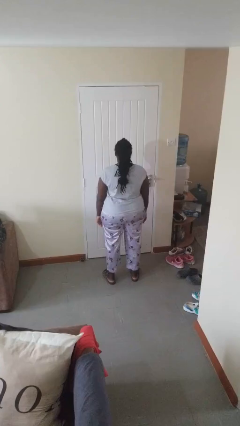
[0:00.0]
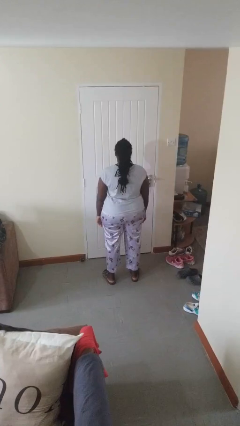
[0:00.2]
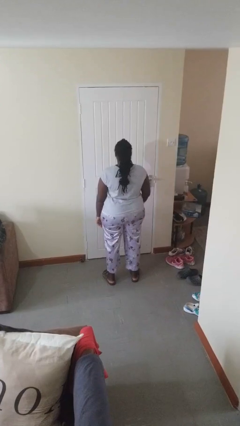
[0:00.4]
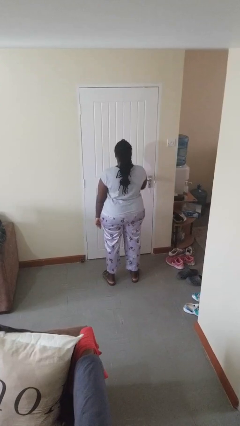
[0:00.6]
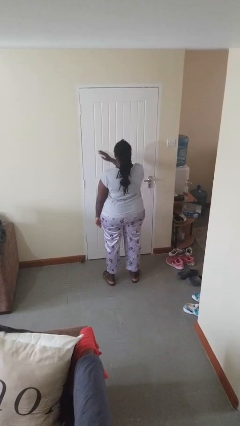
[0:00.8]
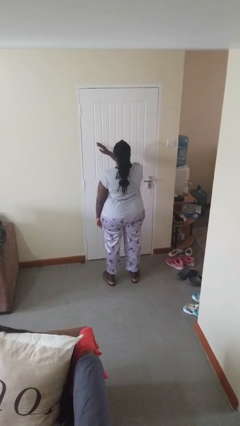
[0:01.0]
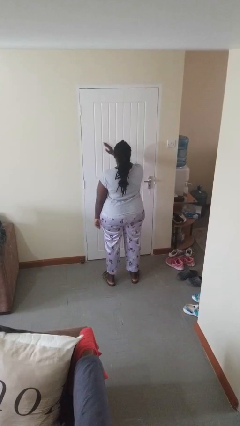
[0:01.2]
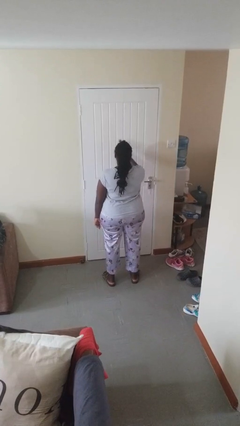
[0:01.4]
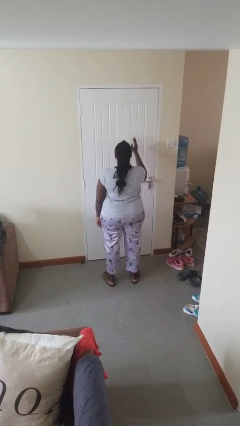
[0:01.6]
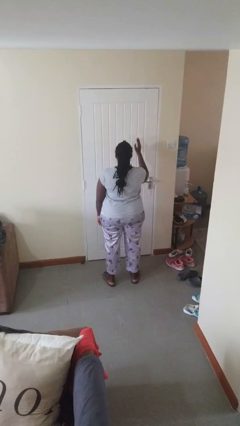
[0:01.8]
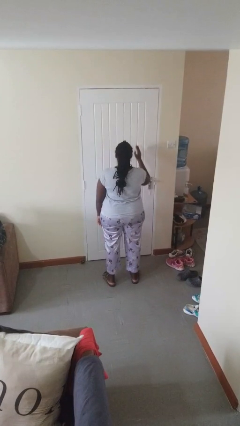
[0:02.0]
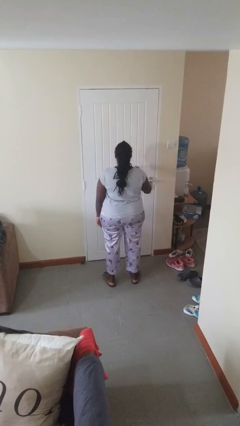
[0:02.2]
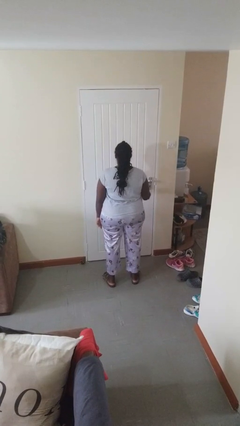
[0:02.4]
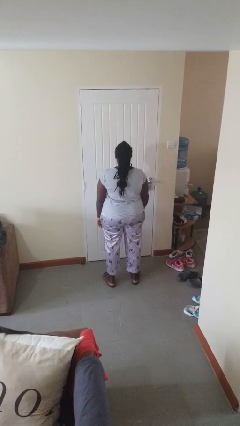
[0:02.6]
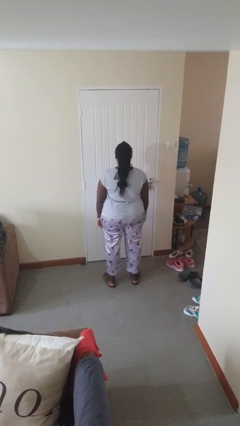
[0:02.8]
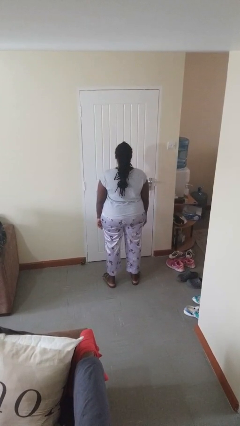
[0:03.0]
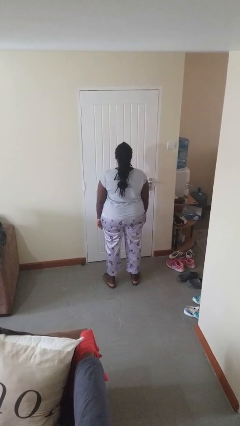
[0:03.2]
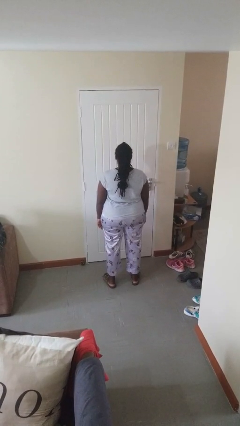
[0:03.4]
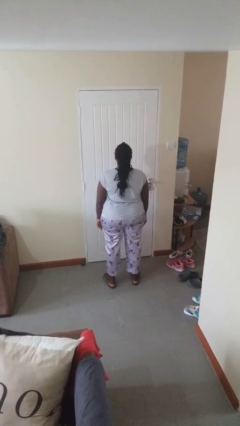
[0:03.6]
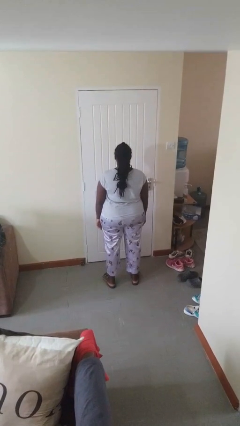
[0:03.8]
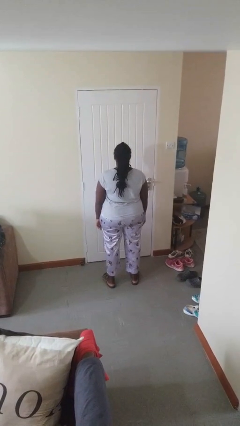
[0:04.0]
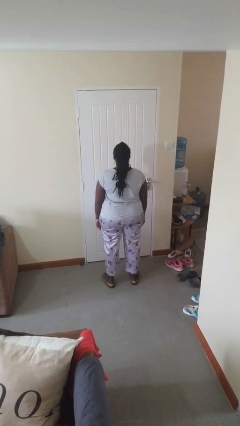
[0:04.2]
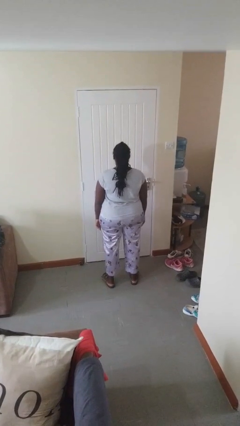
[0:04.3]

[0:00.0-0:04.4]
person gestures swipe right

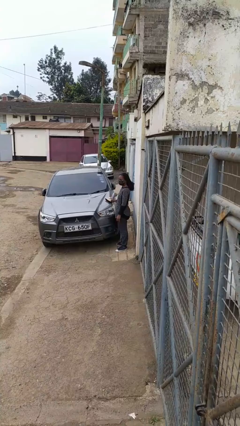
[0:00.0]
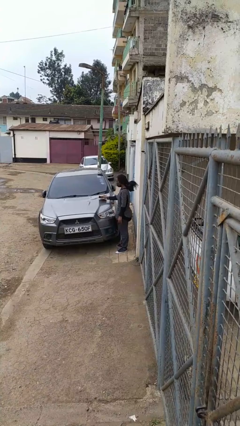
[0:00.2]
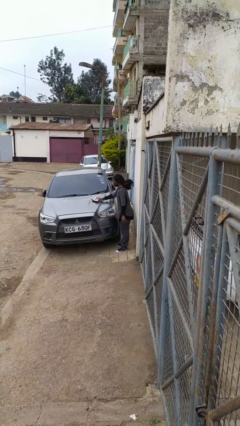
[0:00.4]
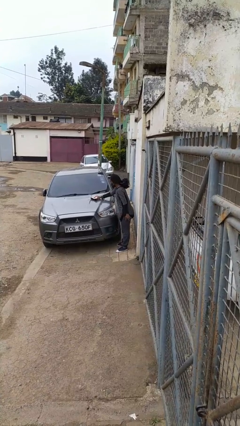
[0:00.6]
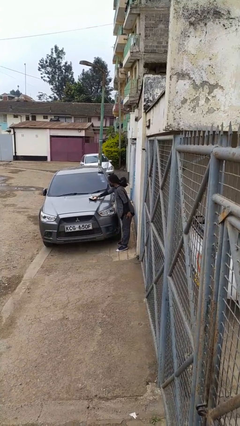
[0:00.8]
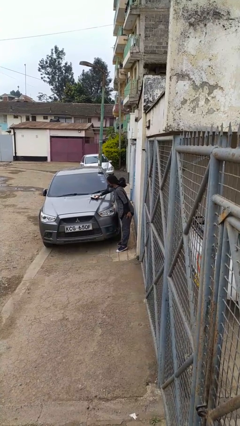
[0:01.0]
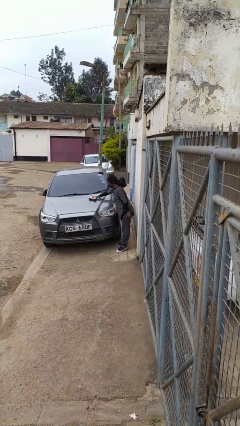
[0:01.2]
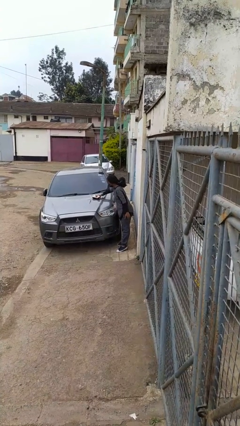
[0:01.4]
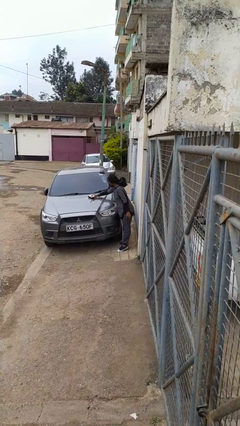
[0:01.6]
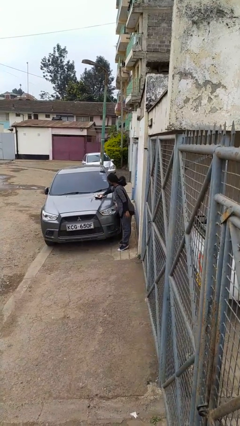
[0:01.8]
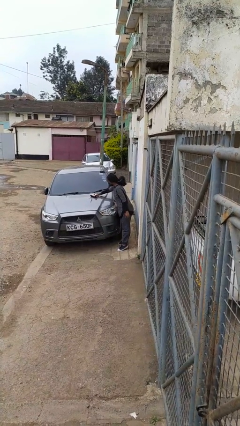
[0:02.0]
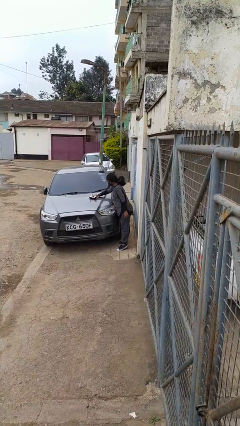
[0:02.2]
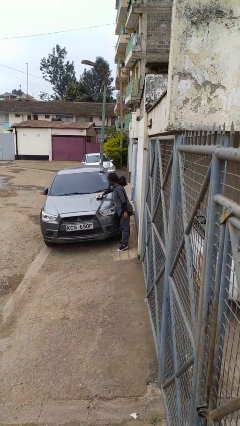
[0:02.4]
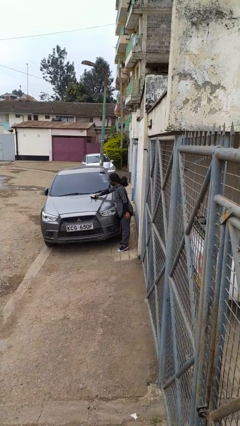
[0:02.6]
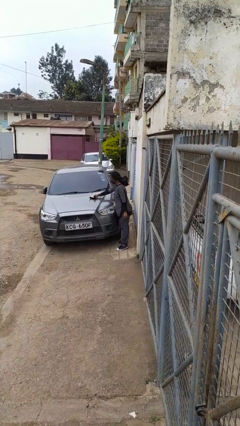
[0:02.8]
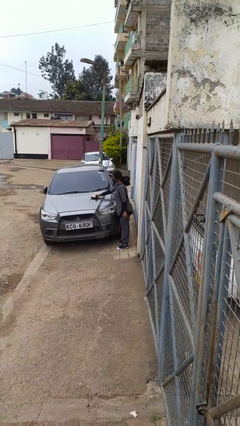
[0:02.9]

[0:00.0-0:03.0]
person polishes car with rag

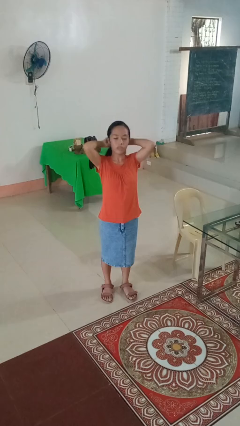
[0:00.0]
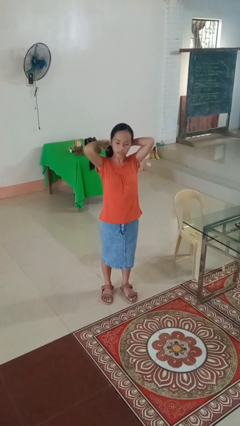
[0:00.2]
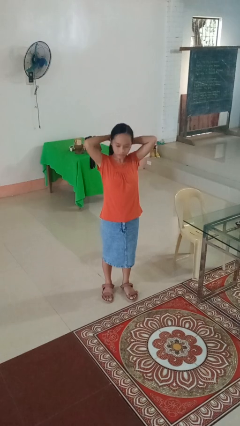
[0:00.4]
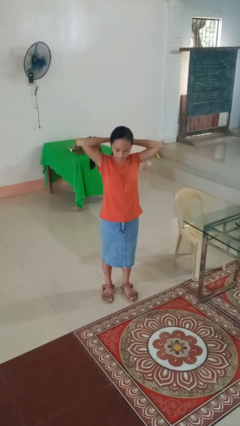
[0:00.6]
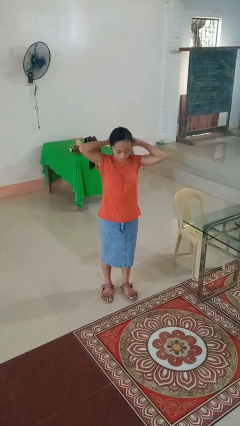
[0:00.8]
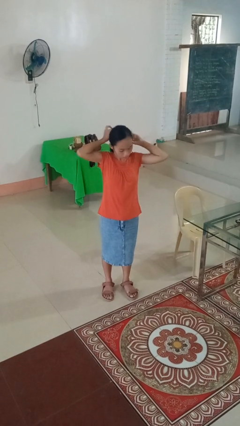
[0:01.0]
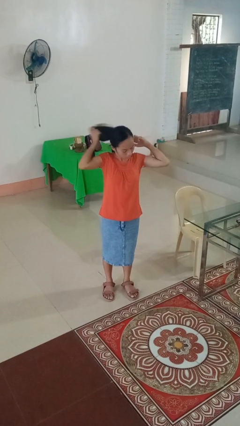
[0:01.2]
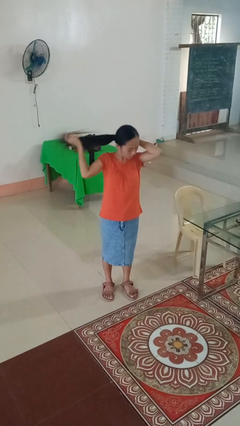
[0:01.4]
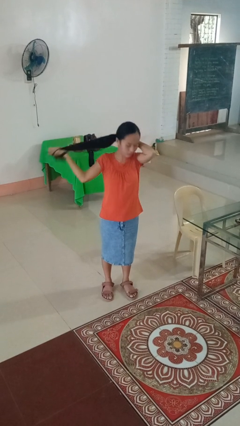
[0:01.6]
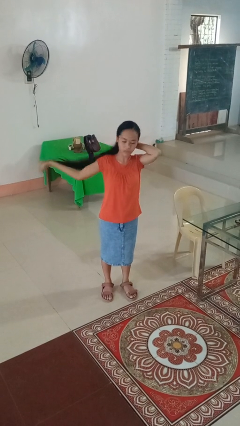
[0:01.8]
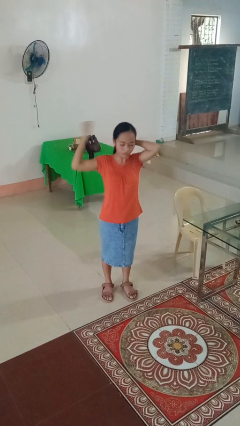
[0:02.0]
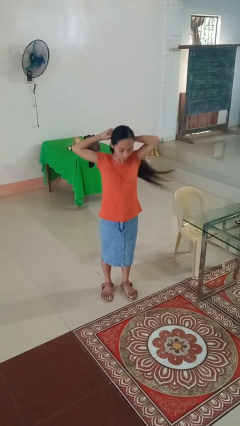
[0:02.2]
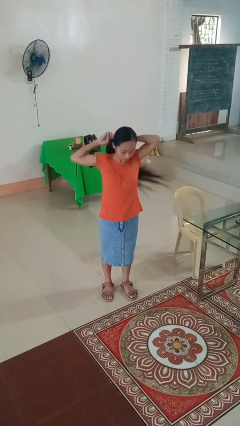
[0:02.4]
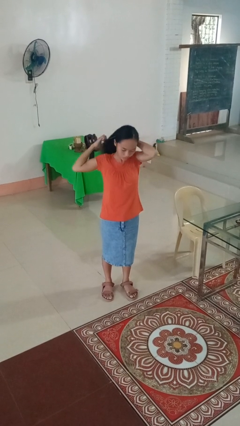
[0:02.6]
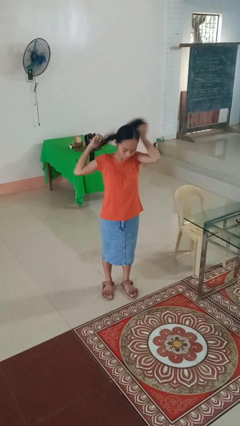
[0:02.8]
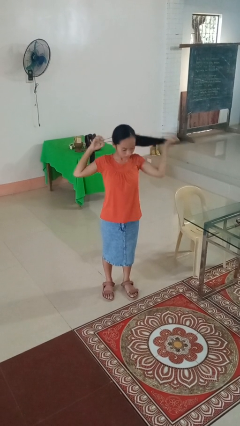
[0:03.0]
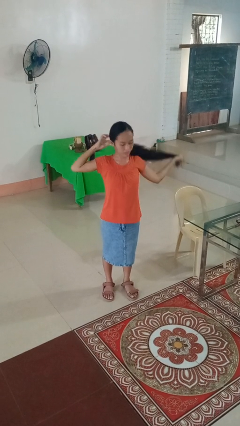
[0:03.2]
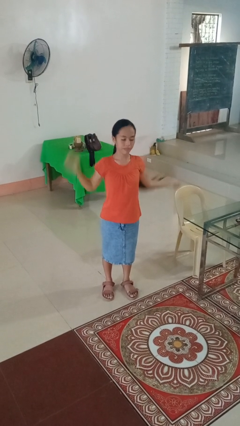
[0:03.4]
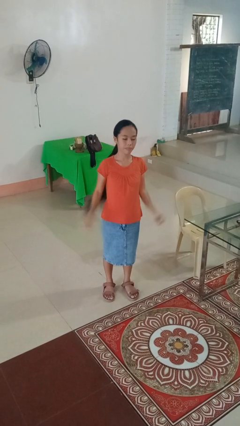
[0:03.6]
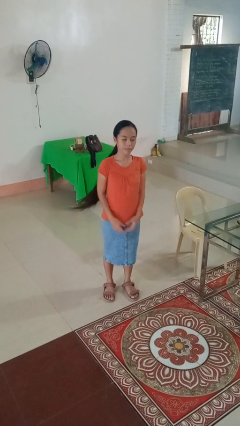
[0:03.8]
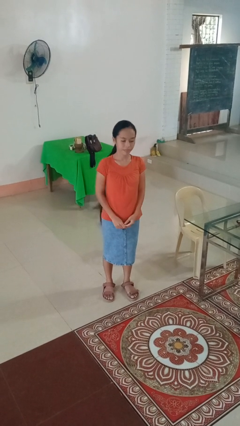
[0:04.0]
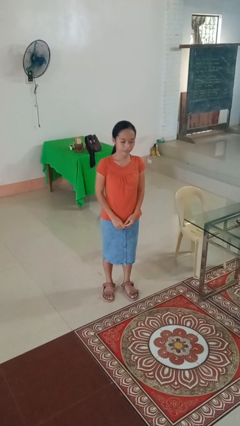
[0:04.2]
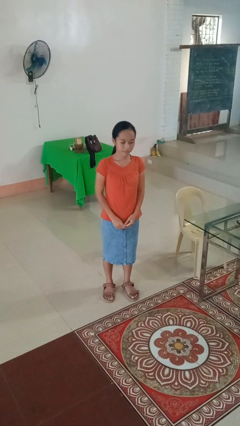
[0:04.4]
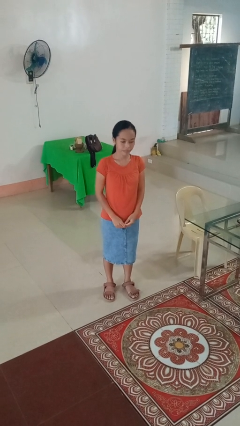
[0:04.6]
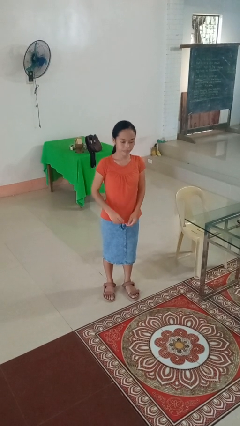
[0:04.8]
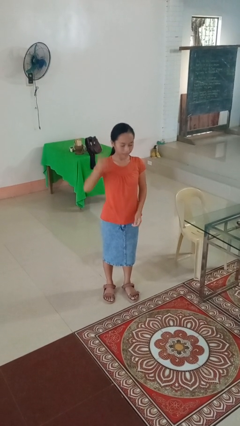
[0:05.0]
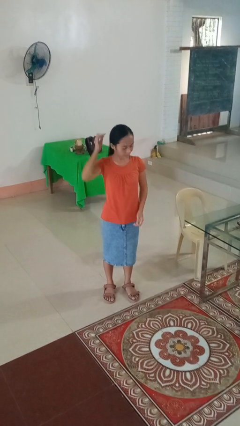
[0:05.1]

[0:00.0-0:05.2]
person puts hair in ponytail

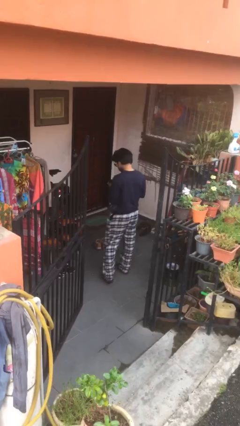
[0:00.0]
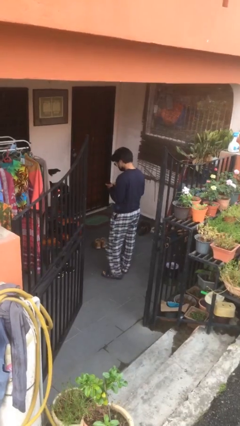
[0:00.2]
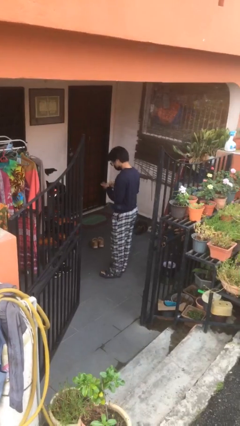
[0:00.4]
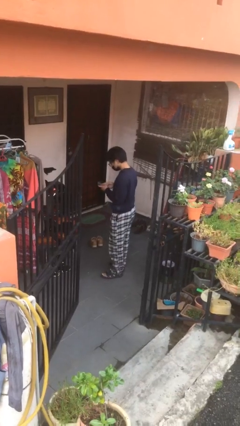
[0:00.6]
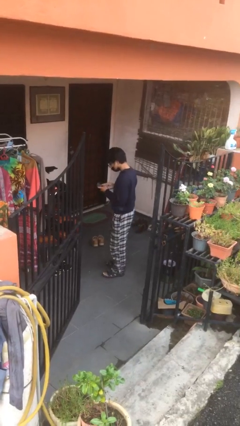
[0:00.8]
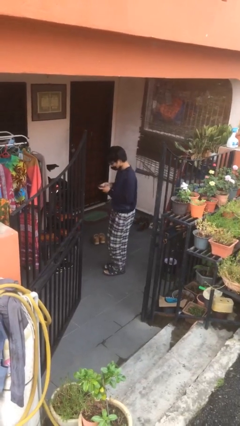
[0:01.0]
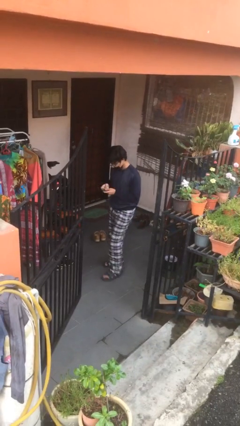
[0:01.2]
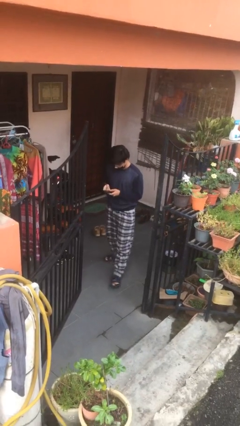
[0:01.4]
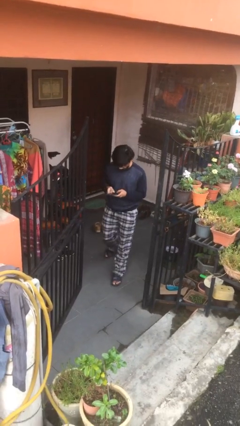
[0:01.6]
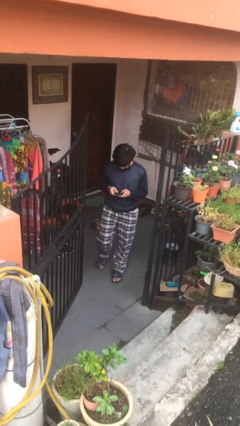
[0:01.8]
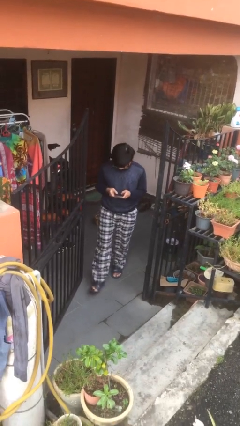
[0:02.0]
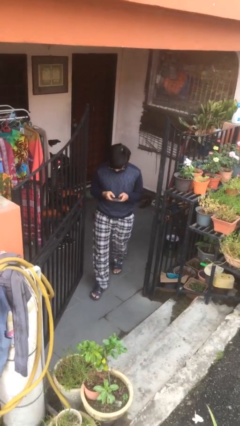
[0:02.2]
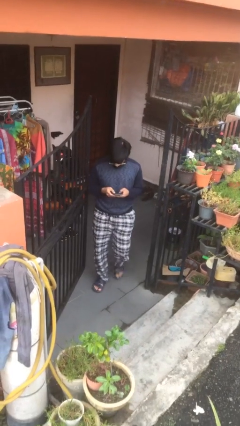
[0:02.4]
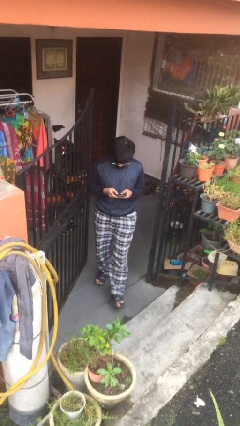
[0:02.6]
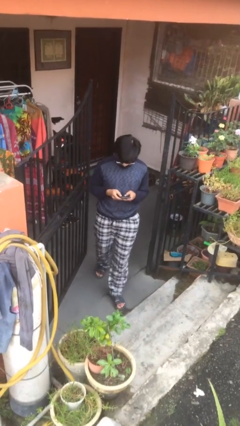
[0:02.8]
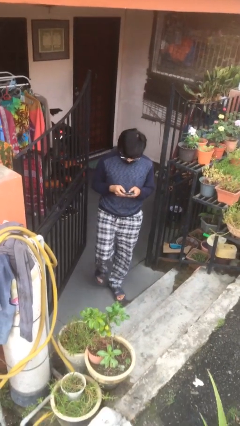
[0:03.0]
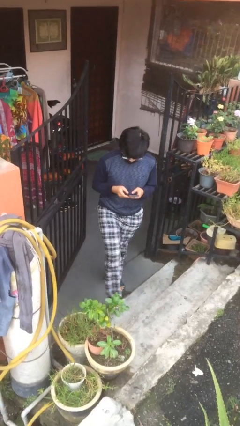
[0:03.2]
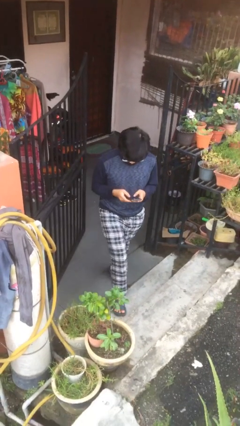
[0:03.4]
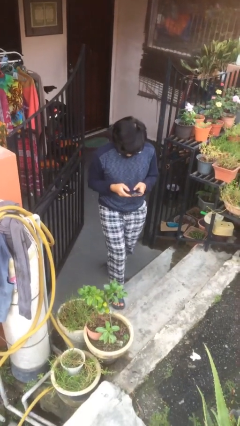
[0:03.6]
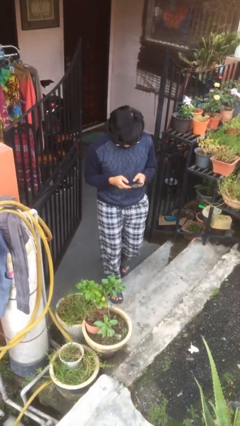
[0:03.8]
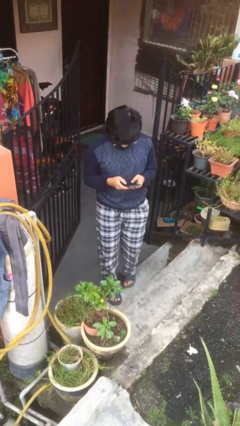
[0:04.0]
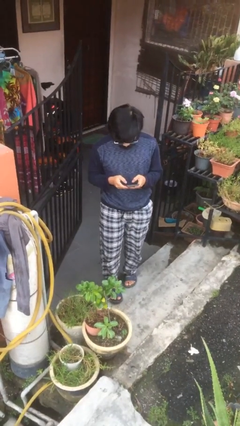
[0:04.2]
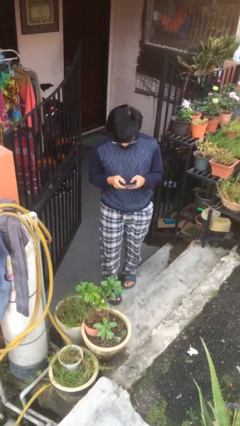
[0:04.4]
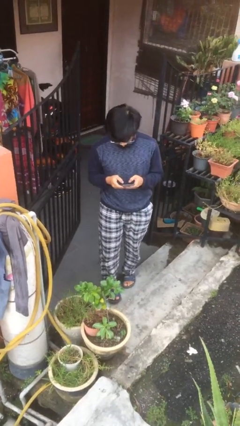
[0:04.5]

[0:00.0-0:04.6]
person enters scene through structure

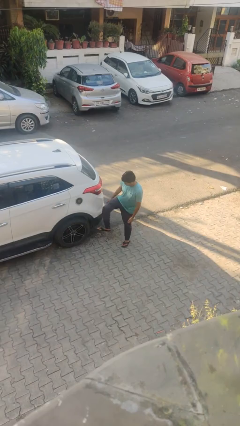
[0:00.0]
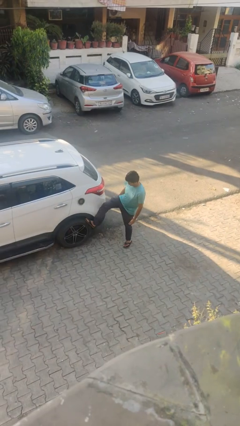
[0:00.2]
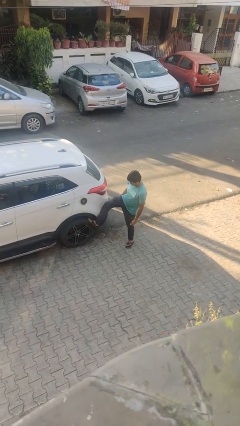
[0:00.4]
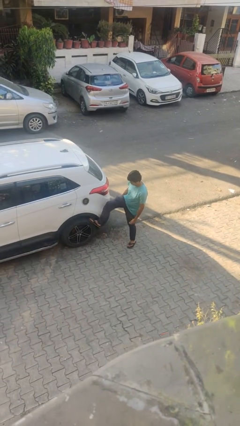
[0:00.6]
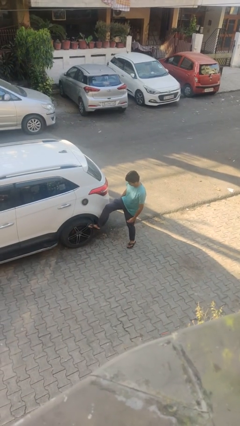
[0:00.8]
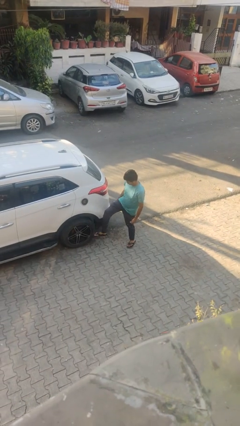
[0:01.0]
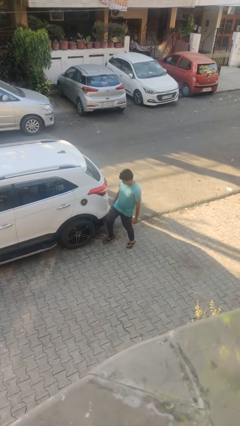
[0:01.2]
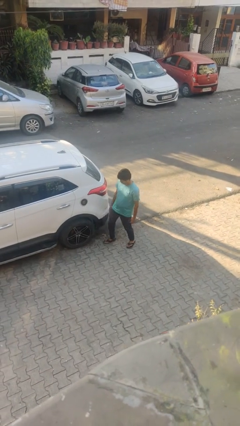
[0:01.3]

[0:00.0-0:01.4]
person kicks car tires
